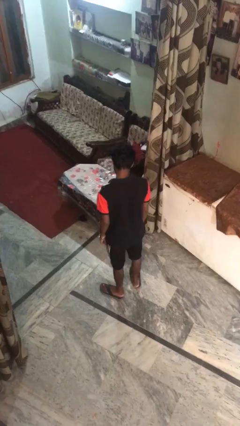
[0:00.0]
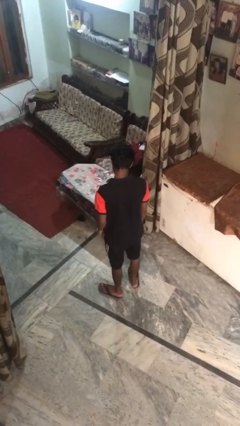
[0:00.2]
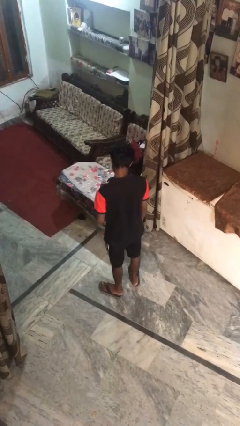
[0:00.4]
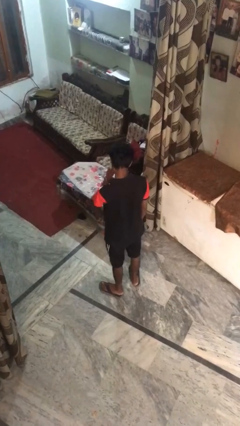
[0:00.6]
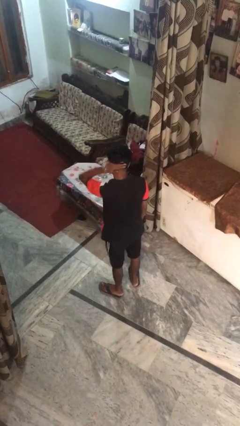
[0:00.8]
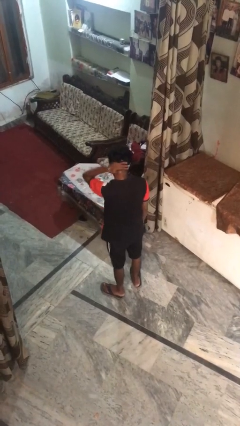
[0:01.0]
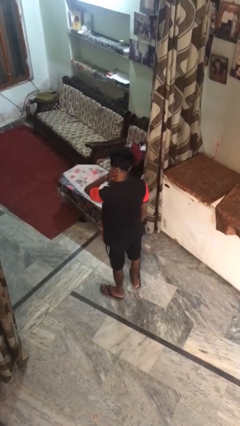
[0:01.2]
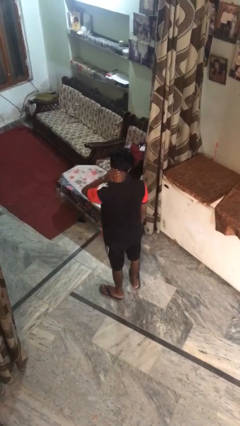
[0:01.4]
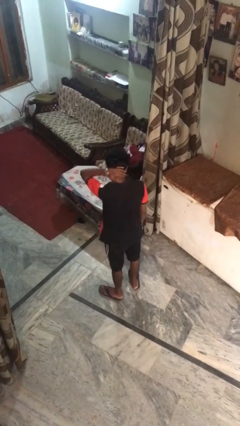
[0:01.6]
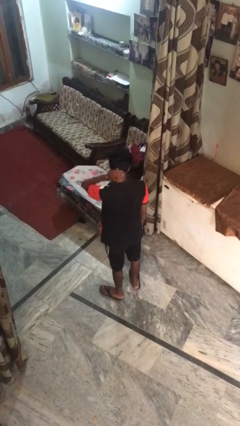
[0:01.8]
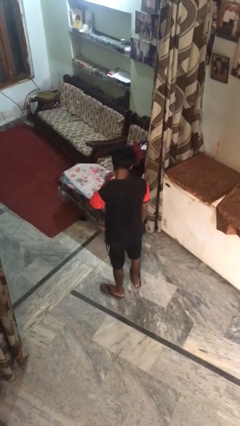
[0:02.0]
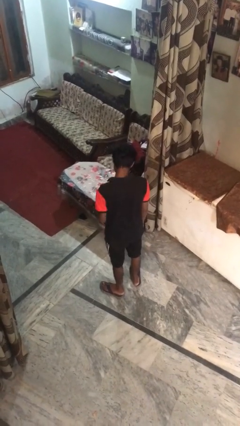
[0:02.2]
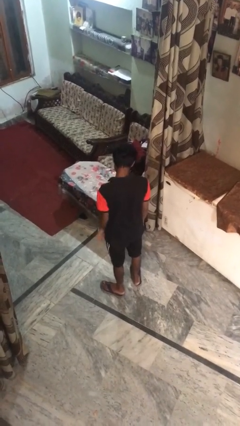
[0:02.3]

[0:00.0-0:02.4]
person rubs neck

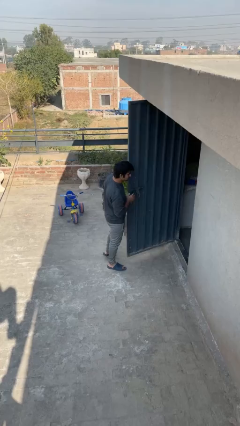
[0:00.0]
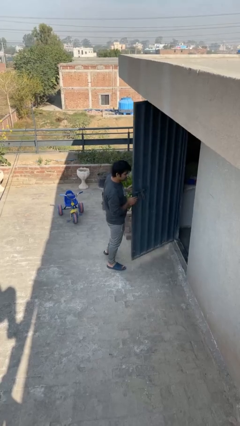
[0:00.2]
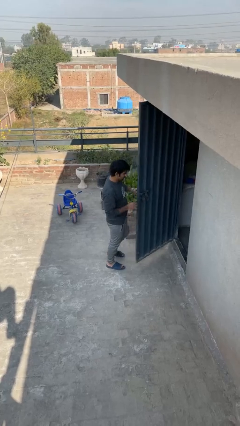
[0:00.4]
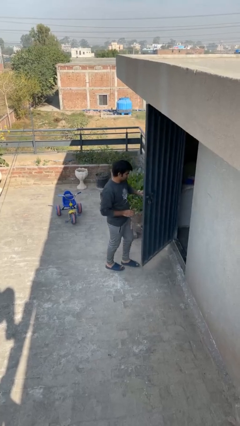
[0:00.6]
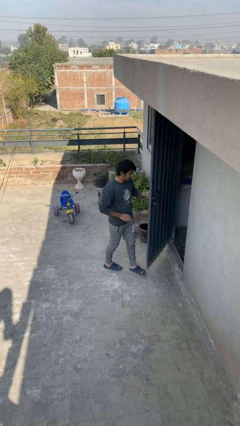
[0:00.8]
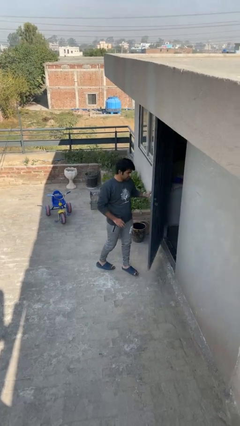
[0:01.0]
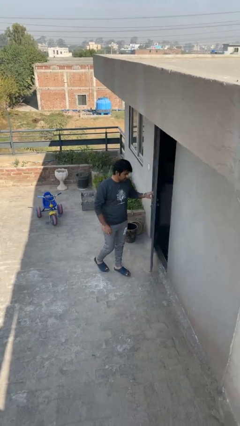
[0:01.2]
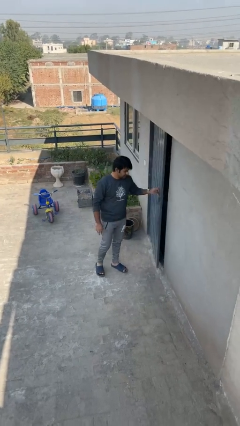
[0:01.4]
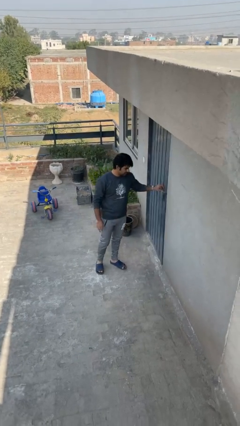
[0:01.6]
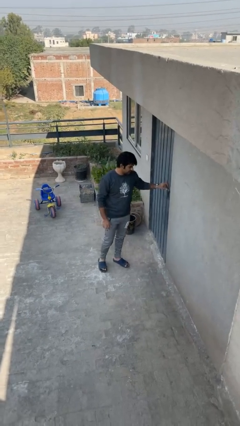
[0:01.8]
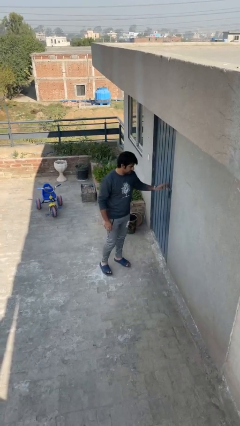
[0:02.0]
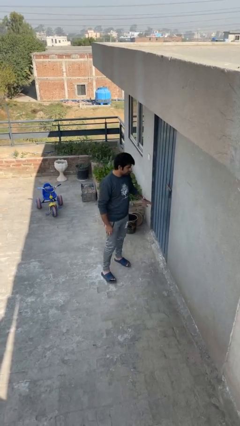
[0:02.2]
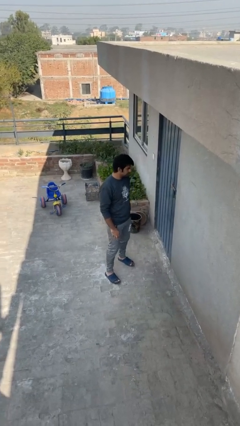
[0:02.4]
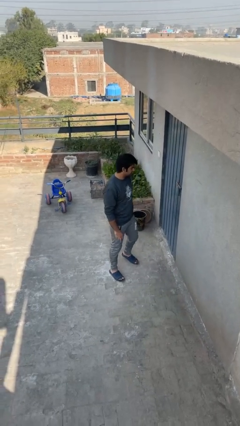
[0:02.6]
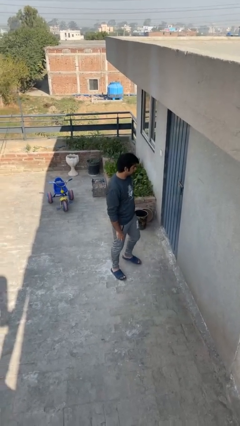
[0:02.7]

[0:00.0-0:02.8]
person closes facility door

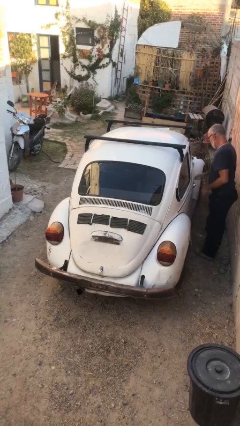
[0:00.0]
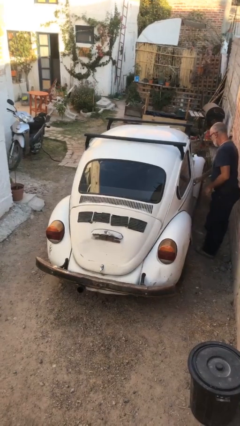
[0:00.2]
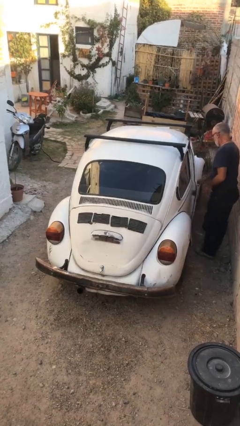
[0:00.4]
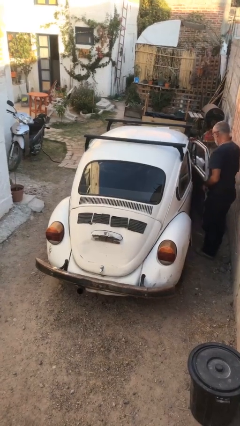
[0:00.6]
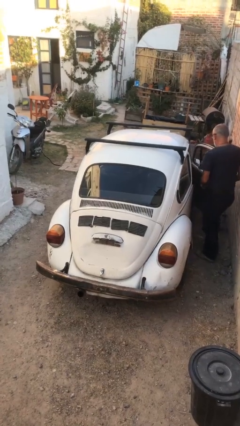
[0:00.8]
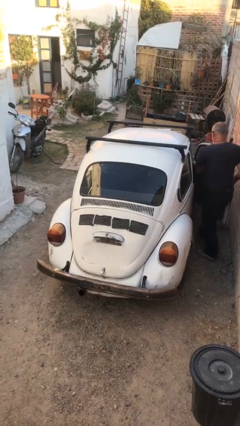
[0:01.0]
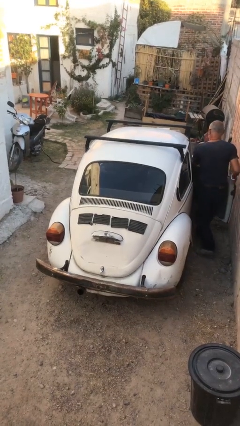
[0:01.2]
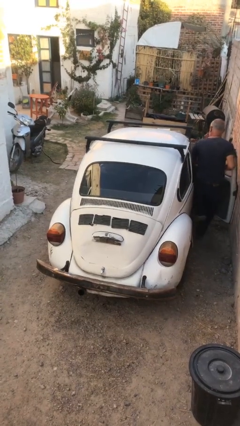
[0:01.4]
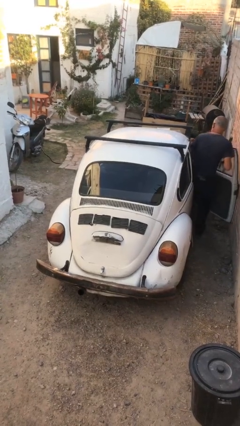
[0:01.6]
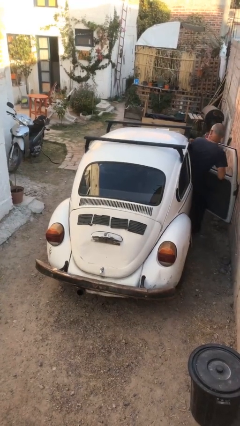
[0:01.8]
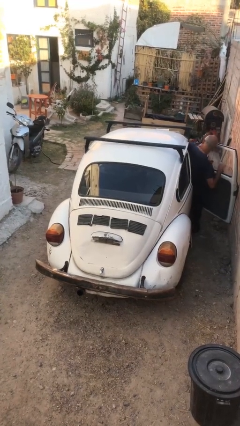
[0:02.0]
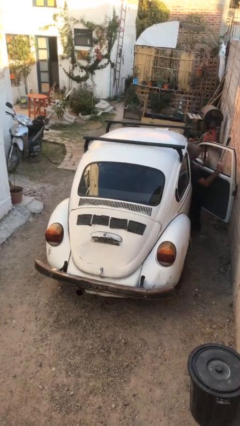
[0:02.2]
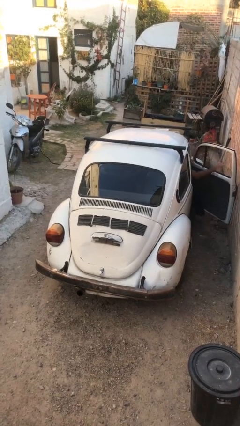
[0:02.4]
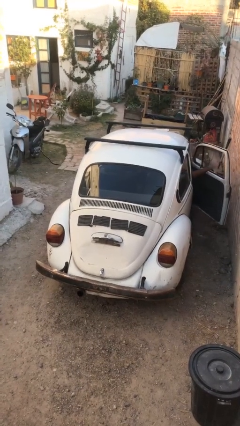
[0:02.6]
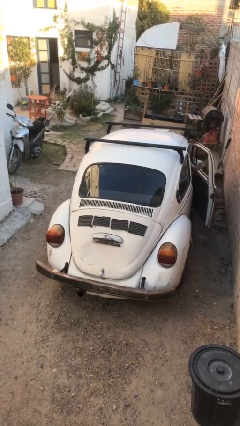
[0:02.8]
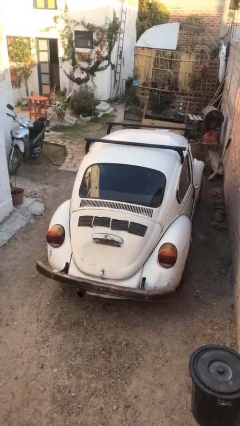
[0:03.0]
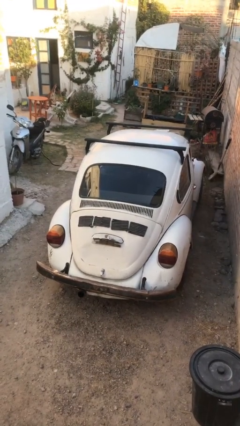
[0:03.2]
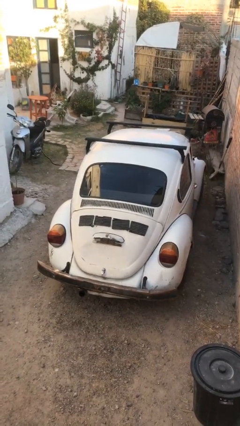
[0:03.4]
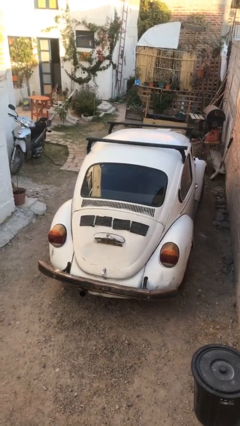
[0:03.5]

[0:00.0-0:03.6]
car picks up person

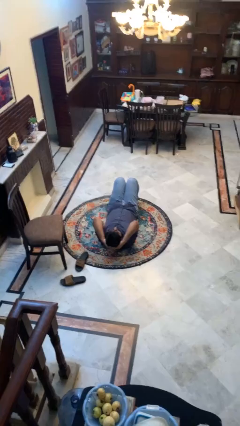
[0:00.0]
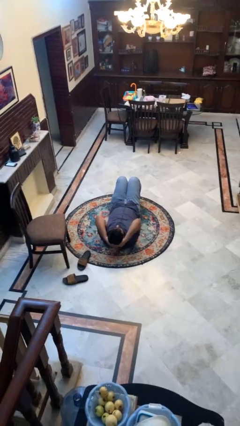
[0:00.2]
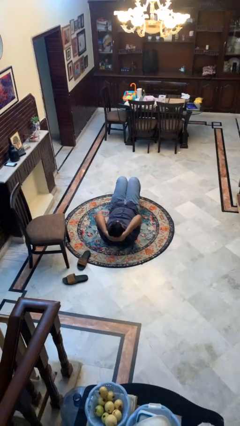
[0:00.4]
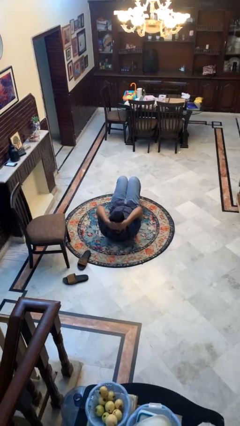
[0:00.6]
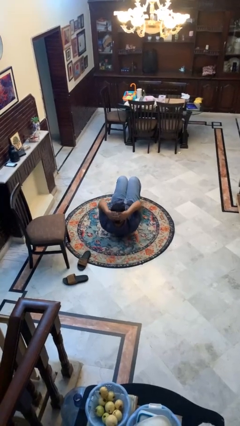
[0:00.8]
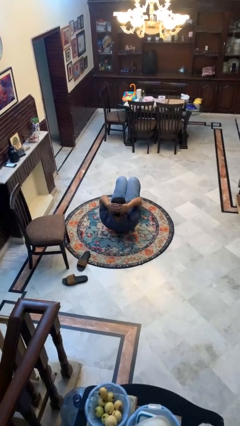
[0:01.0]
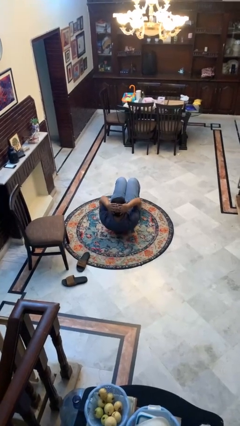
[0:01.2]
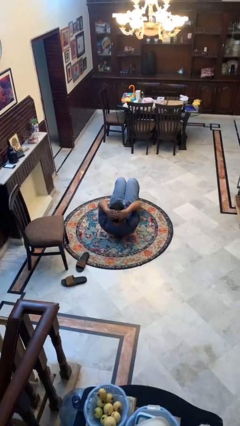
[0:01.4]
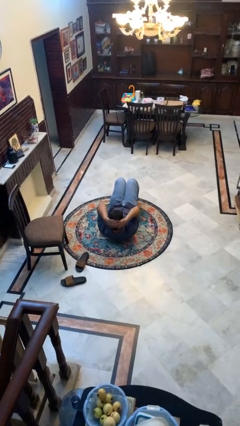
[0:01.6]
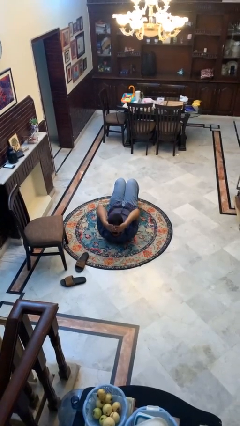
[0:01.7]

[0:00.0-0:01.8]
person exercises with situp

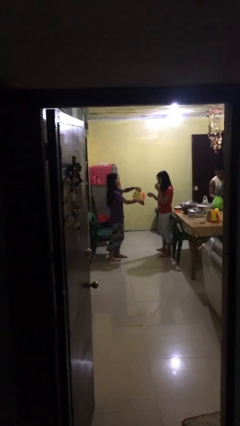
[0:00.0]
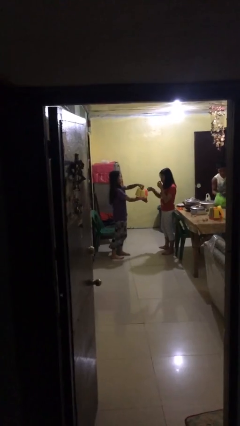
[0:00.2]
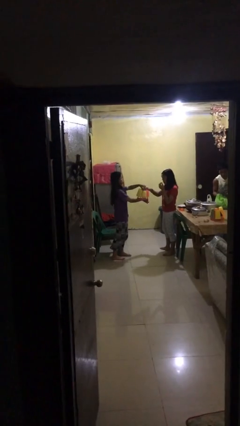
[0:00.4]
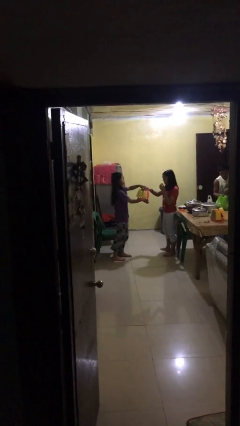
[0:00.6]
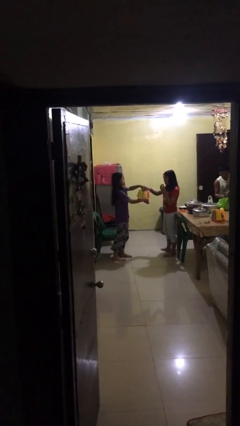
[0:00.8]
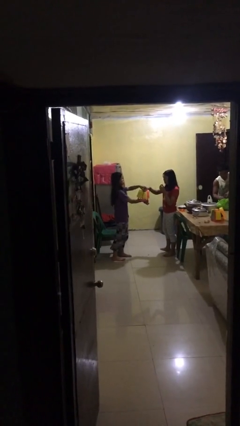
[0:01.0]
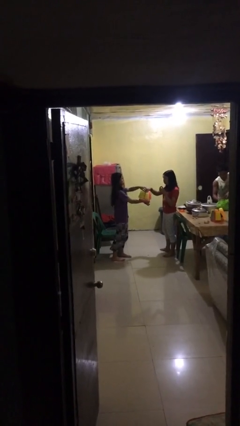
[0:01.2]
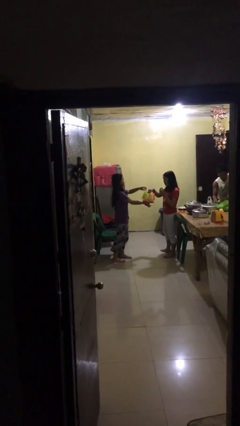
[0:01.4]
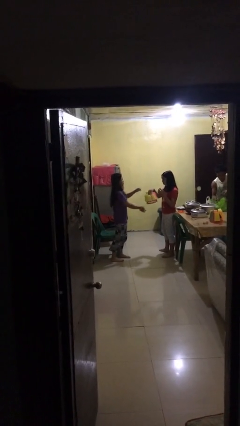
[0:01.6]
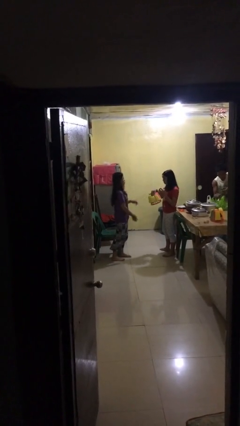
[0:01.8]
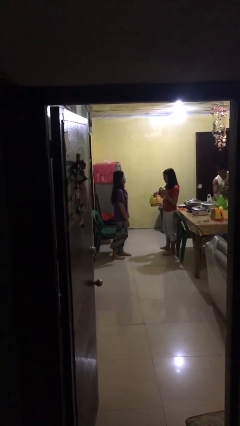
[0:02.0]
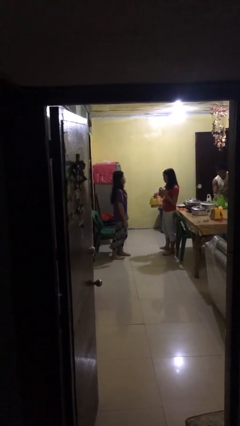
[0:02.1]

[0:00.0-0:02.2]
person transfers object to person

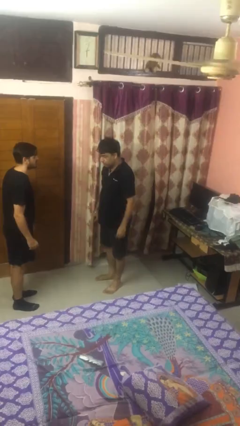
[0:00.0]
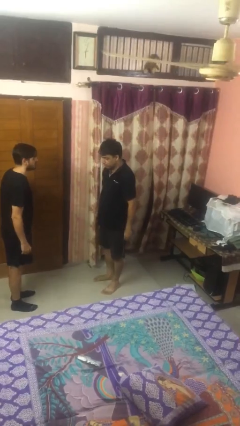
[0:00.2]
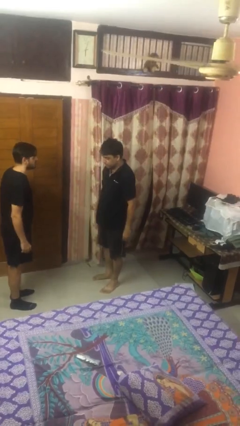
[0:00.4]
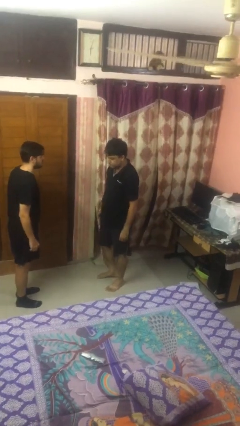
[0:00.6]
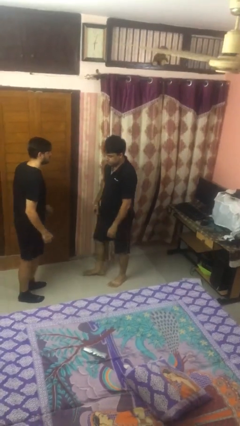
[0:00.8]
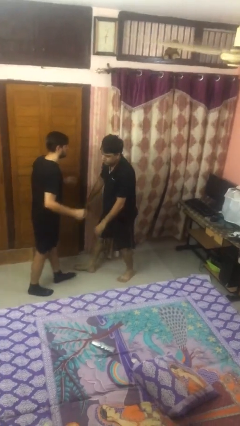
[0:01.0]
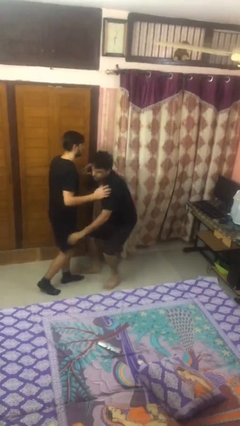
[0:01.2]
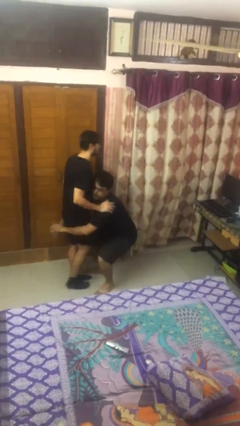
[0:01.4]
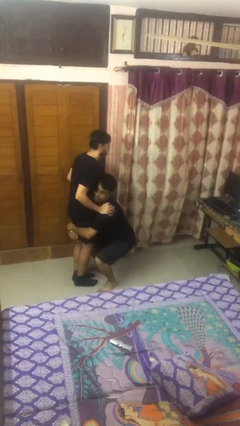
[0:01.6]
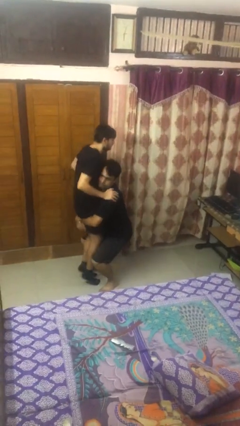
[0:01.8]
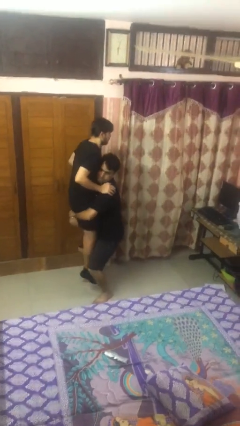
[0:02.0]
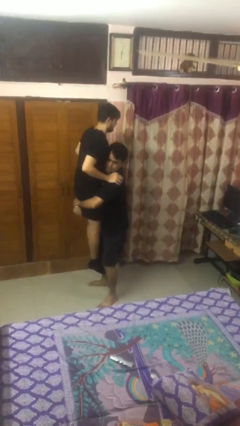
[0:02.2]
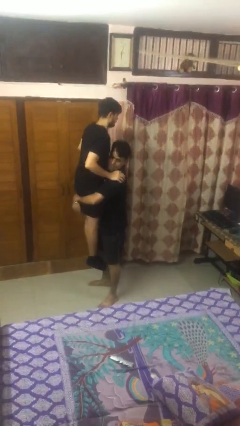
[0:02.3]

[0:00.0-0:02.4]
person picks up person

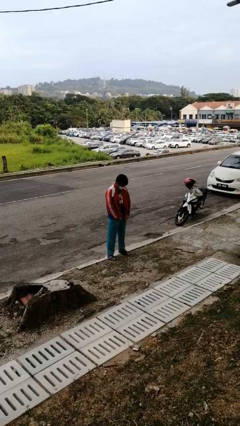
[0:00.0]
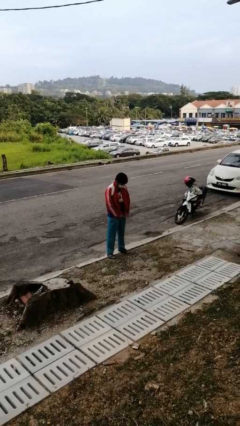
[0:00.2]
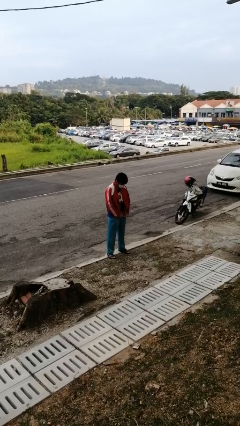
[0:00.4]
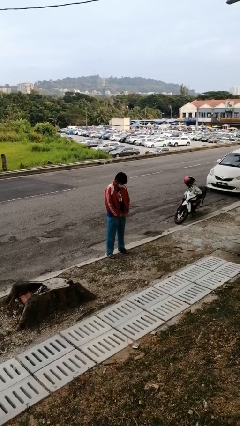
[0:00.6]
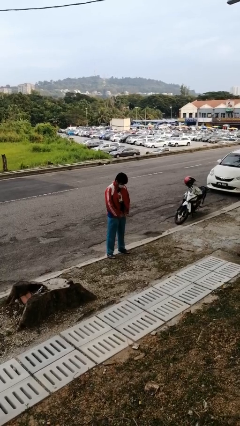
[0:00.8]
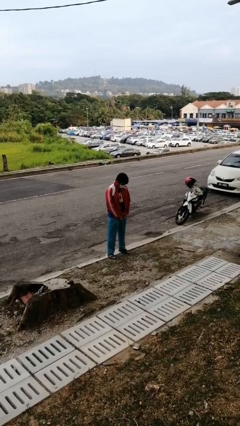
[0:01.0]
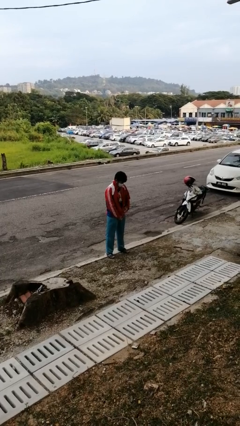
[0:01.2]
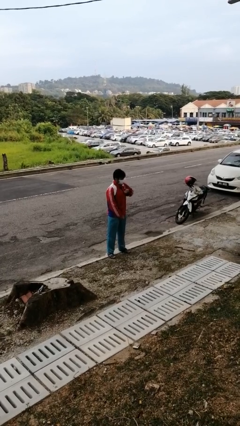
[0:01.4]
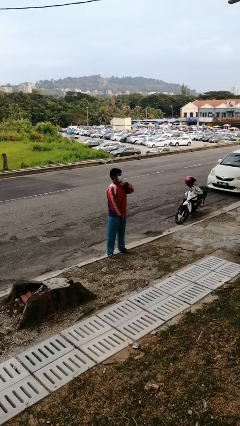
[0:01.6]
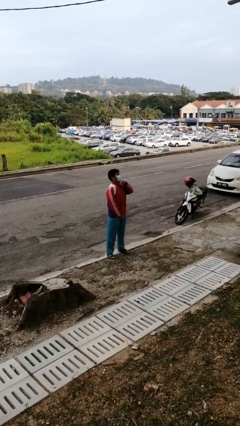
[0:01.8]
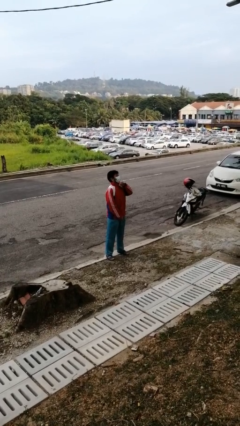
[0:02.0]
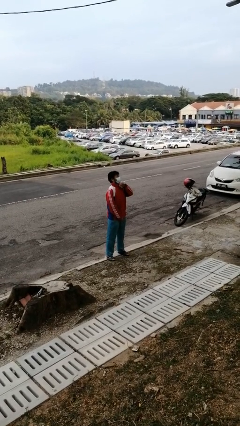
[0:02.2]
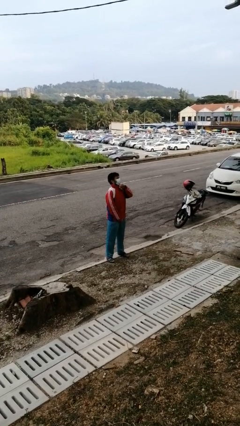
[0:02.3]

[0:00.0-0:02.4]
person zips up jacket
